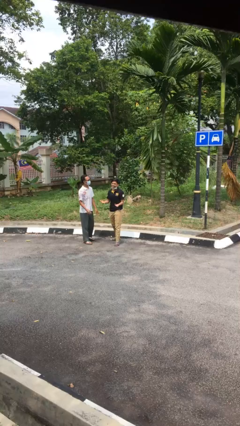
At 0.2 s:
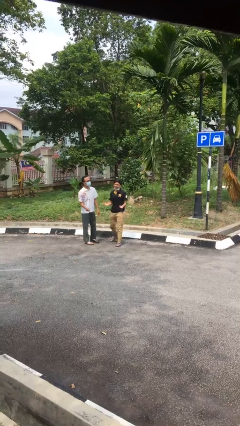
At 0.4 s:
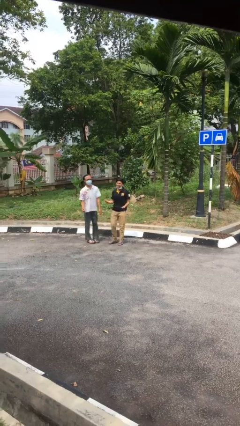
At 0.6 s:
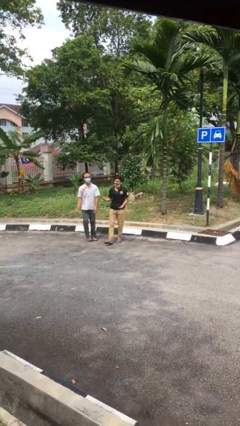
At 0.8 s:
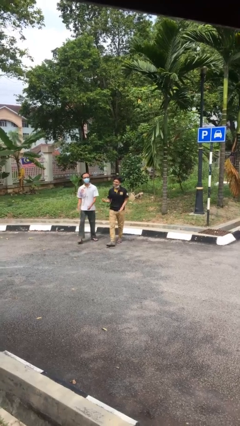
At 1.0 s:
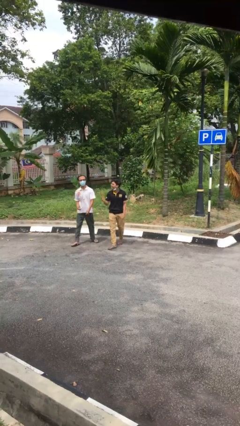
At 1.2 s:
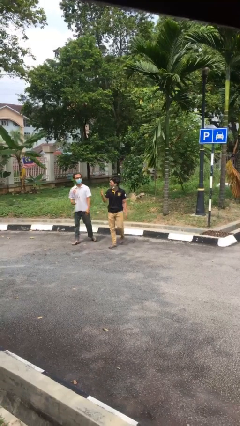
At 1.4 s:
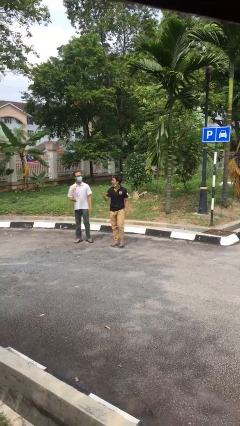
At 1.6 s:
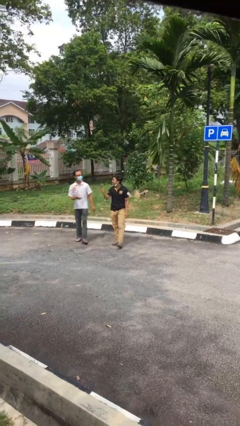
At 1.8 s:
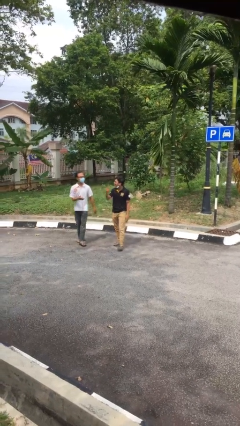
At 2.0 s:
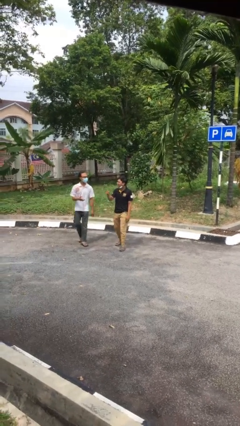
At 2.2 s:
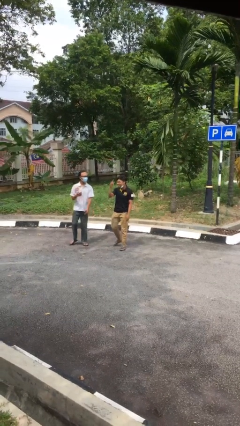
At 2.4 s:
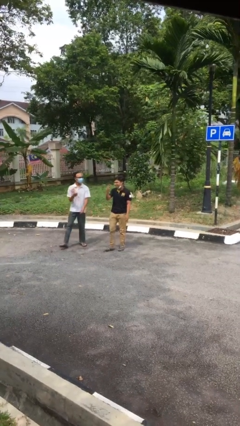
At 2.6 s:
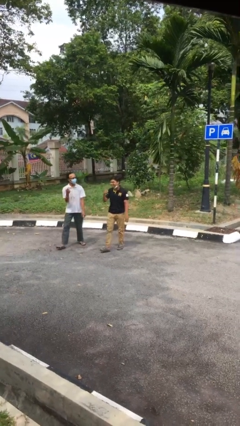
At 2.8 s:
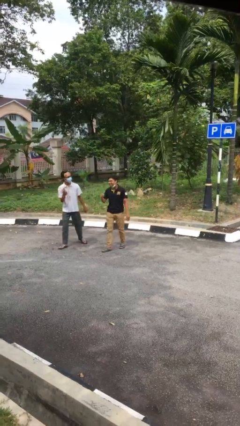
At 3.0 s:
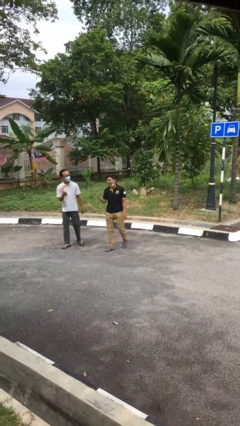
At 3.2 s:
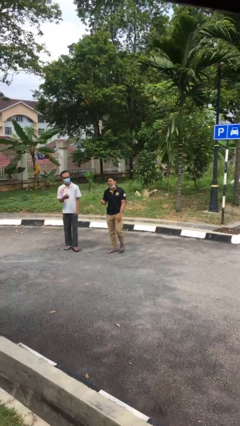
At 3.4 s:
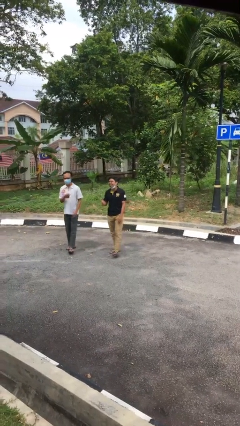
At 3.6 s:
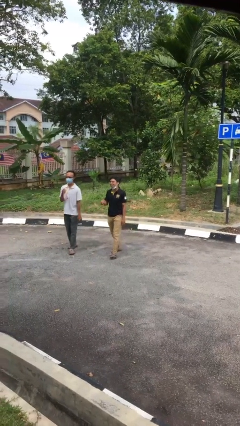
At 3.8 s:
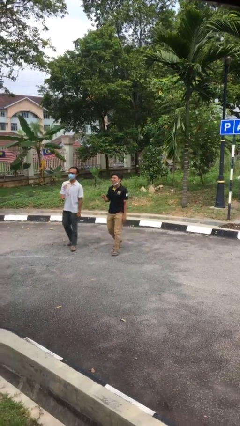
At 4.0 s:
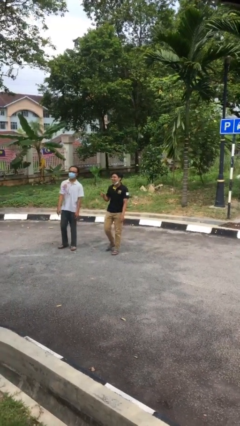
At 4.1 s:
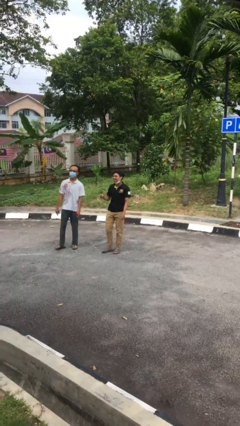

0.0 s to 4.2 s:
person talks to person

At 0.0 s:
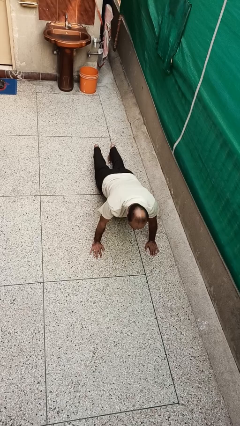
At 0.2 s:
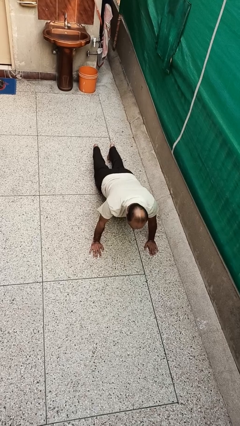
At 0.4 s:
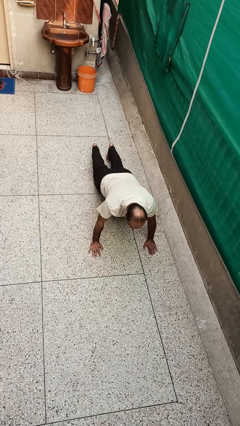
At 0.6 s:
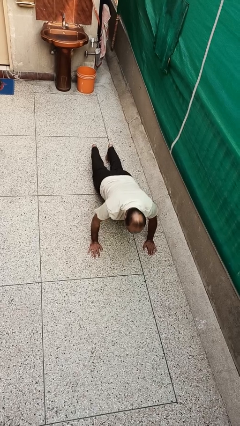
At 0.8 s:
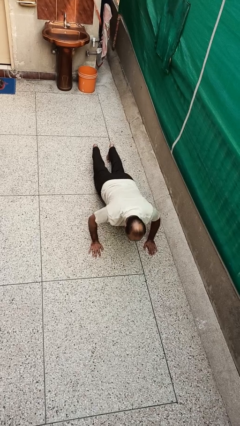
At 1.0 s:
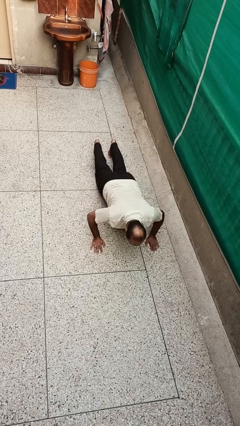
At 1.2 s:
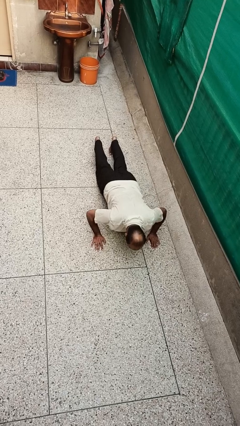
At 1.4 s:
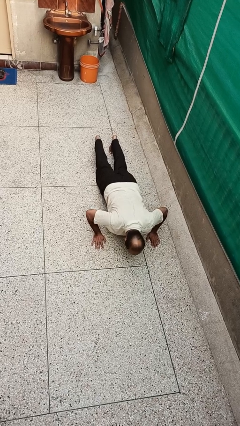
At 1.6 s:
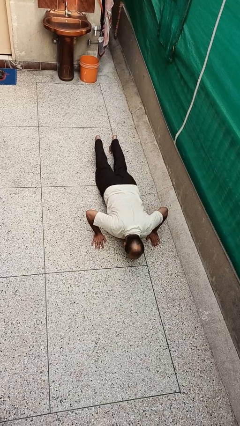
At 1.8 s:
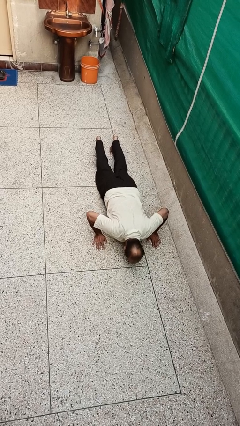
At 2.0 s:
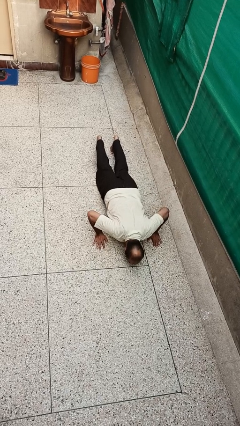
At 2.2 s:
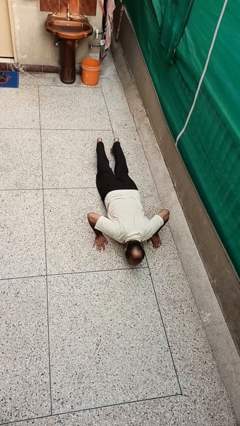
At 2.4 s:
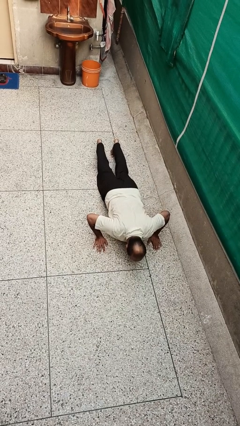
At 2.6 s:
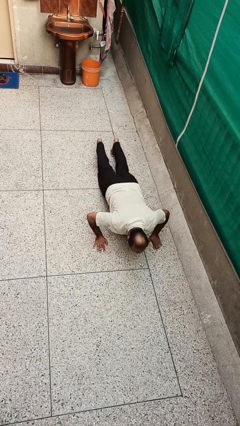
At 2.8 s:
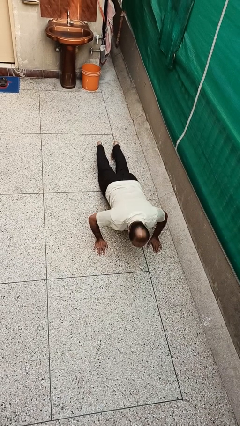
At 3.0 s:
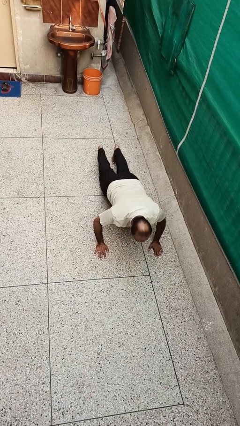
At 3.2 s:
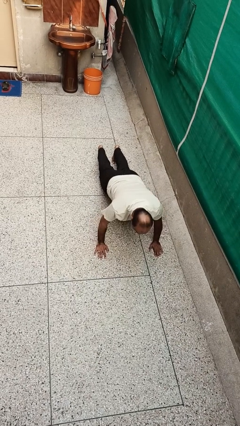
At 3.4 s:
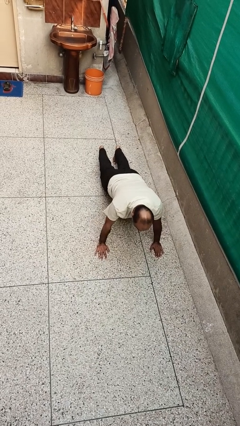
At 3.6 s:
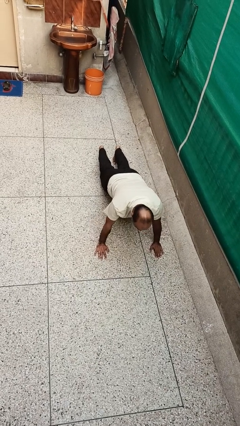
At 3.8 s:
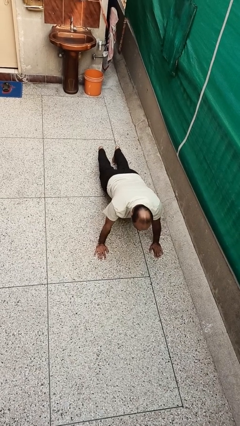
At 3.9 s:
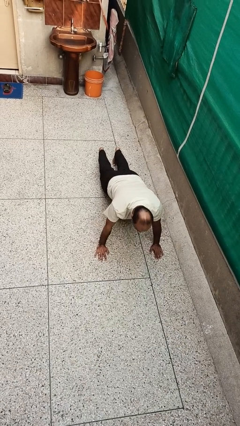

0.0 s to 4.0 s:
person exercises with pushup

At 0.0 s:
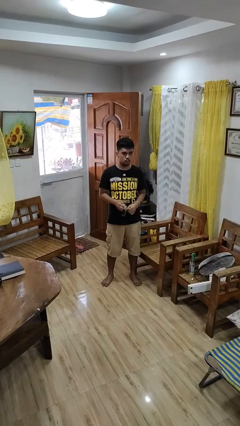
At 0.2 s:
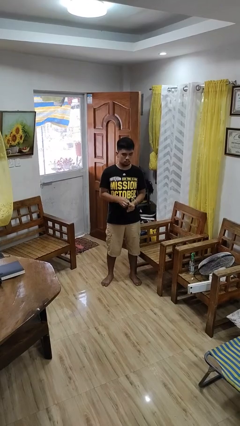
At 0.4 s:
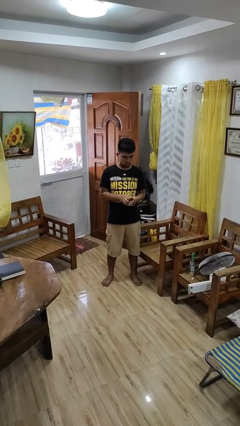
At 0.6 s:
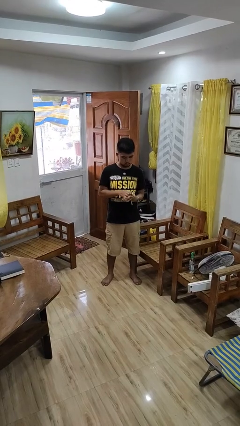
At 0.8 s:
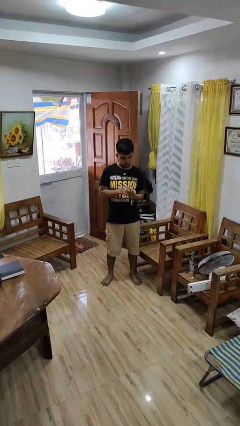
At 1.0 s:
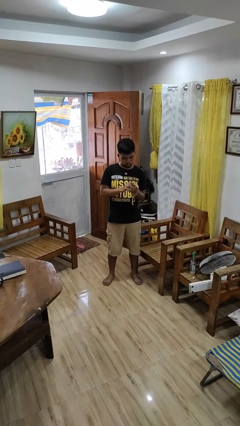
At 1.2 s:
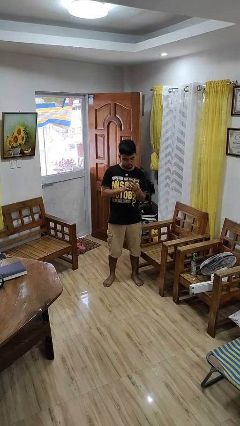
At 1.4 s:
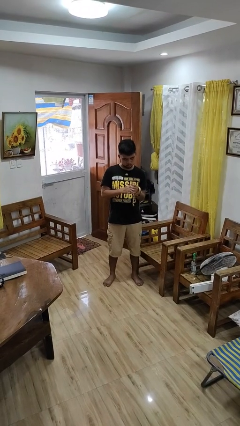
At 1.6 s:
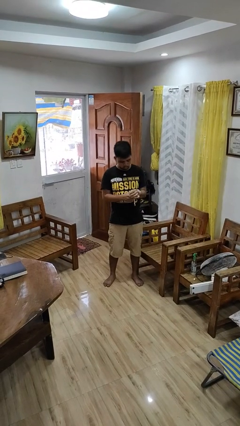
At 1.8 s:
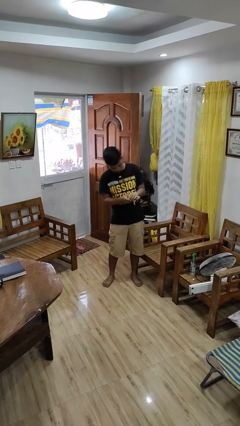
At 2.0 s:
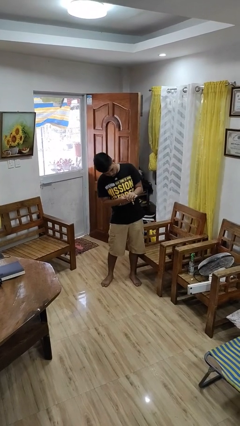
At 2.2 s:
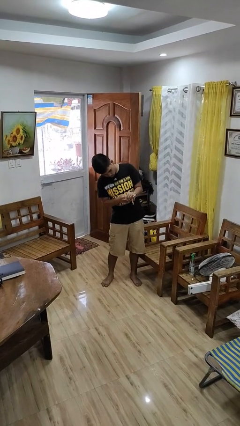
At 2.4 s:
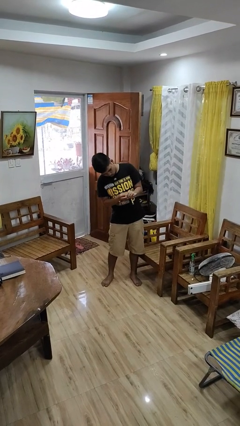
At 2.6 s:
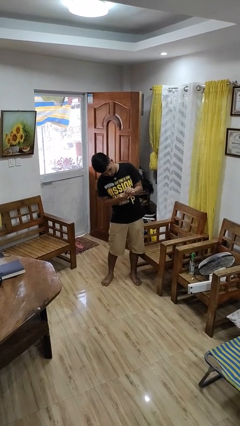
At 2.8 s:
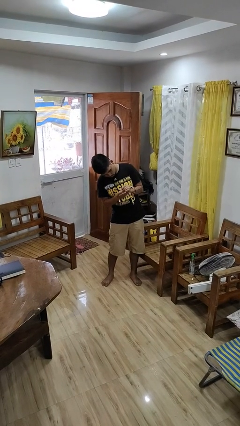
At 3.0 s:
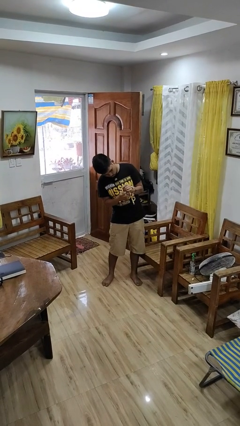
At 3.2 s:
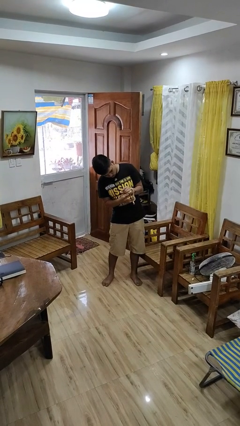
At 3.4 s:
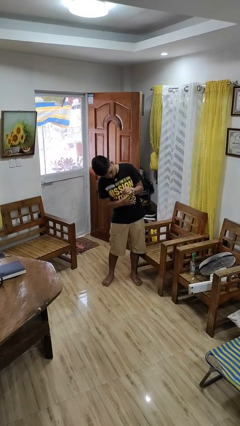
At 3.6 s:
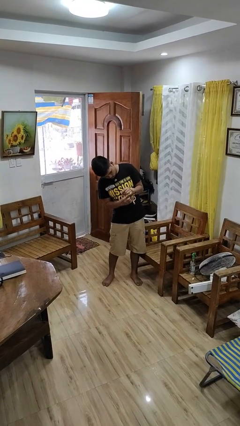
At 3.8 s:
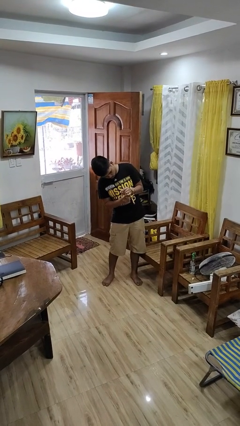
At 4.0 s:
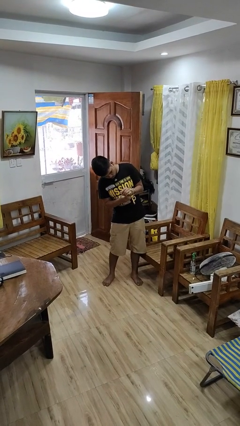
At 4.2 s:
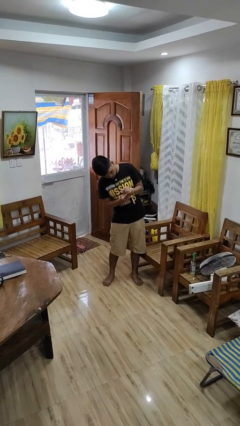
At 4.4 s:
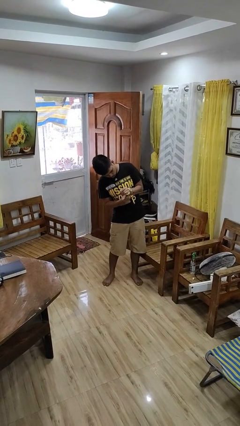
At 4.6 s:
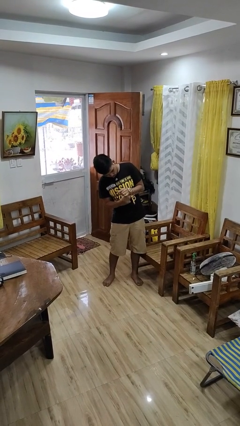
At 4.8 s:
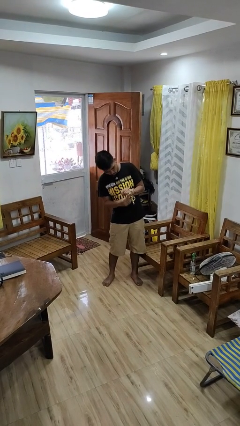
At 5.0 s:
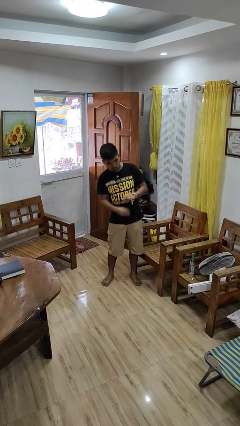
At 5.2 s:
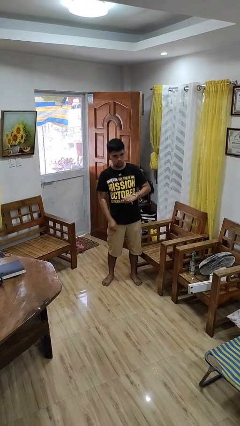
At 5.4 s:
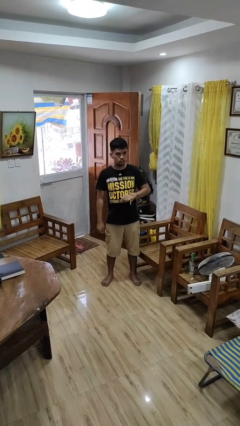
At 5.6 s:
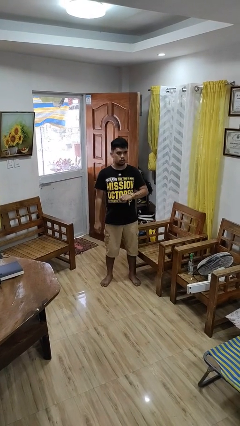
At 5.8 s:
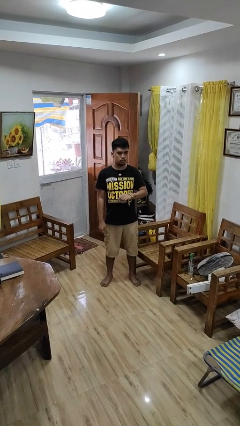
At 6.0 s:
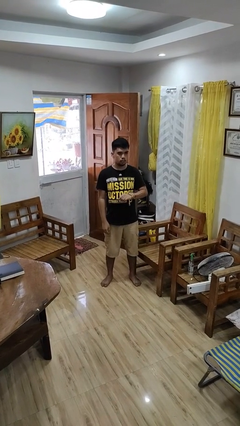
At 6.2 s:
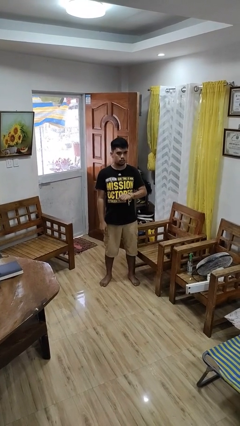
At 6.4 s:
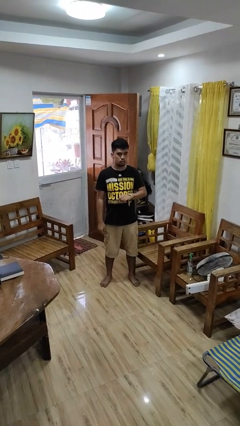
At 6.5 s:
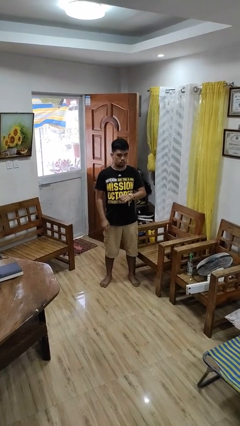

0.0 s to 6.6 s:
person puts on wristwatch

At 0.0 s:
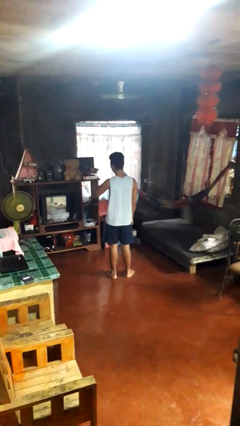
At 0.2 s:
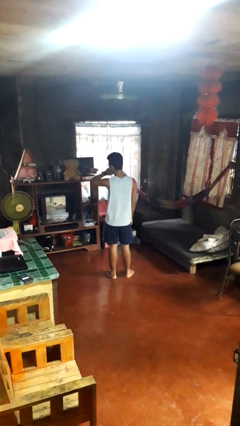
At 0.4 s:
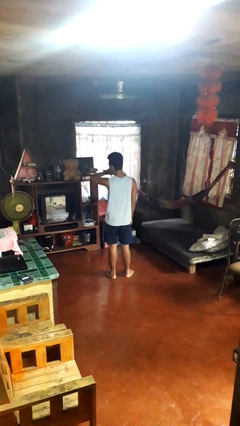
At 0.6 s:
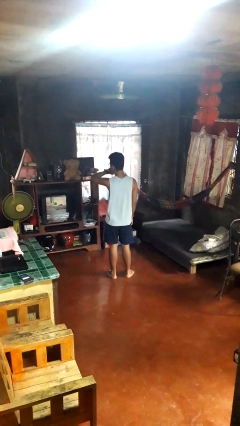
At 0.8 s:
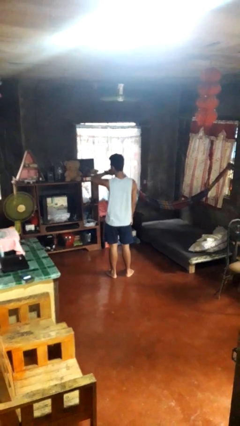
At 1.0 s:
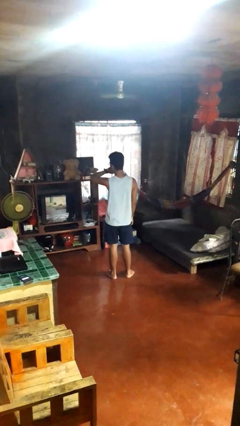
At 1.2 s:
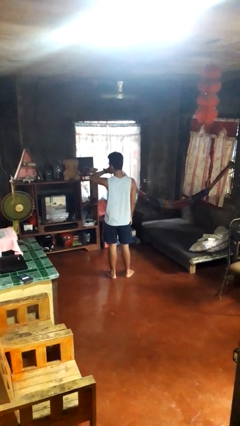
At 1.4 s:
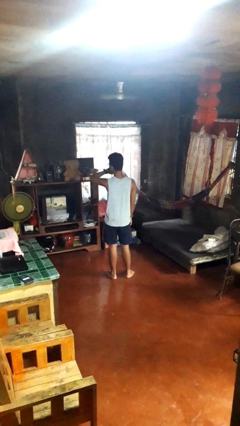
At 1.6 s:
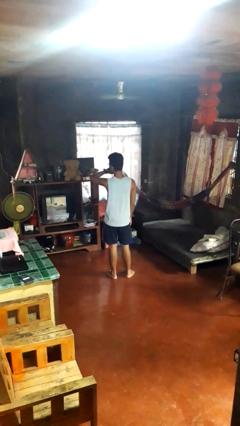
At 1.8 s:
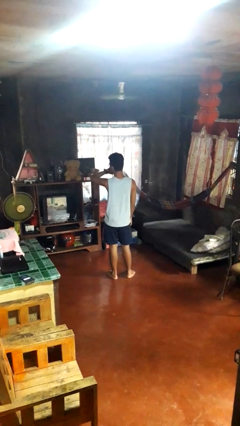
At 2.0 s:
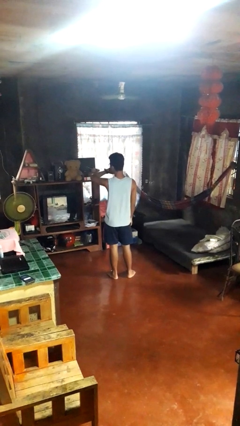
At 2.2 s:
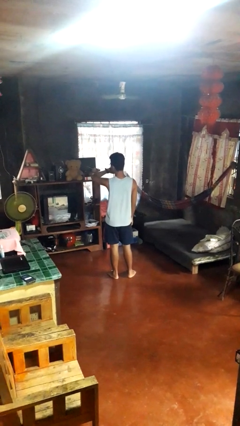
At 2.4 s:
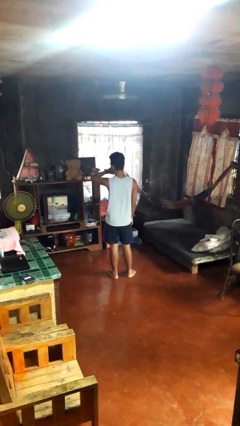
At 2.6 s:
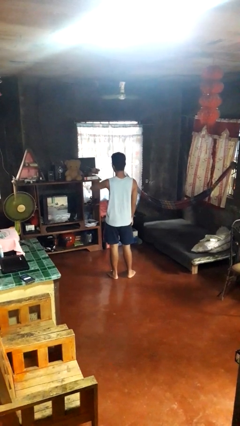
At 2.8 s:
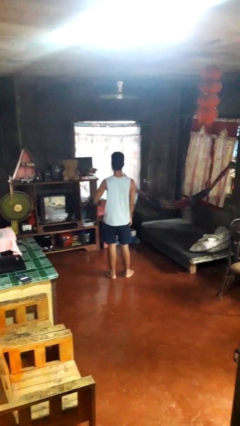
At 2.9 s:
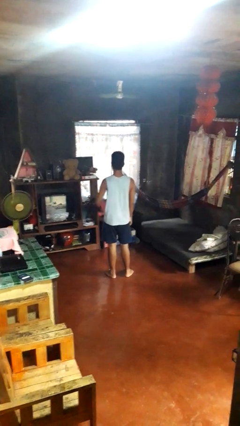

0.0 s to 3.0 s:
person looks at wristwatch
